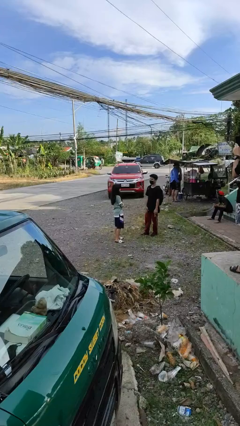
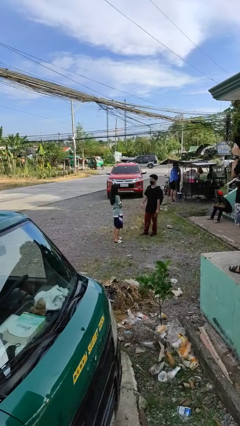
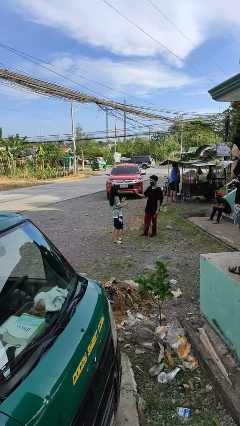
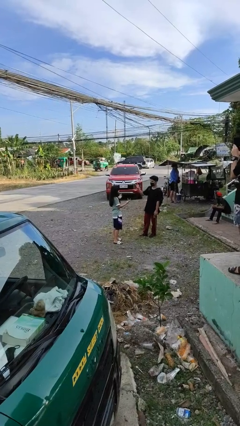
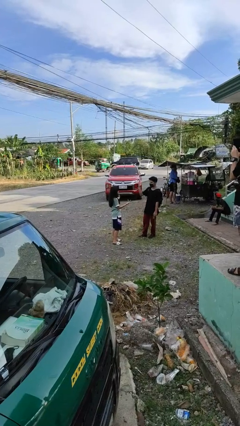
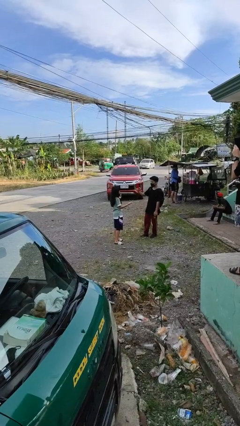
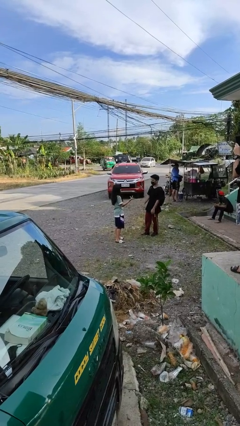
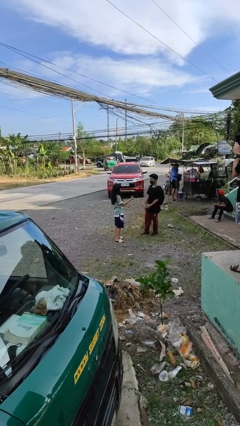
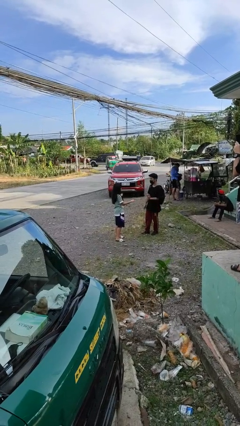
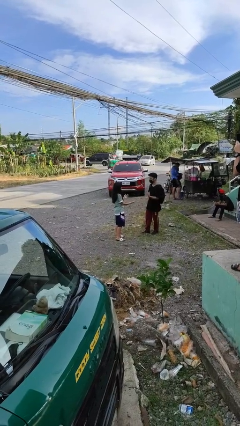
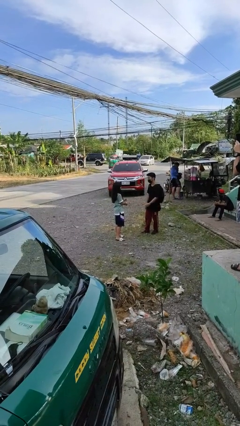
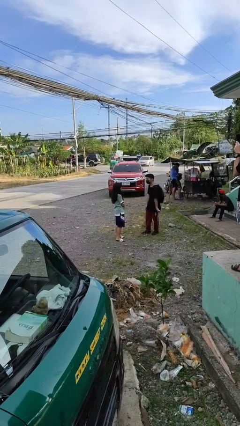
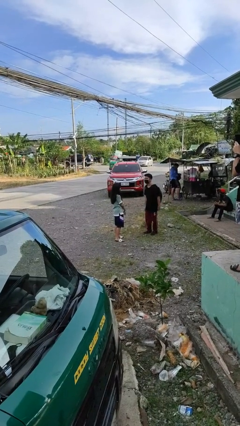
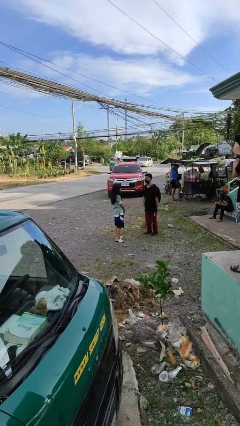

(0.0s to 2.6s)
person talks to person

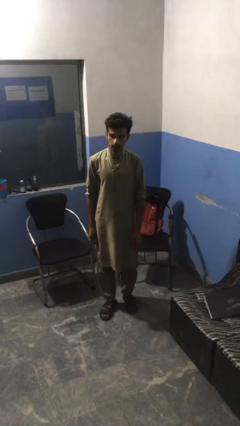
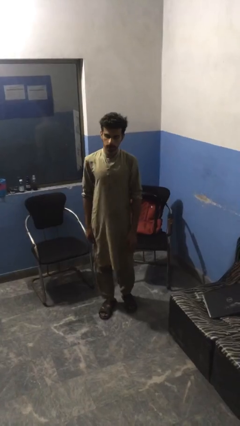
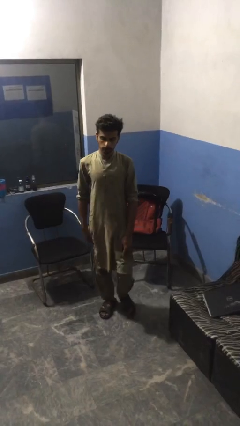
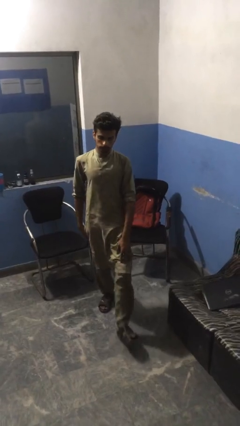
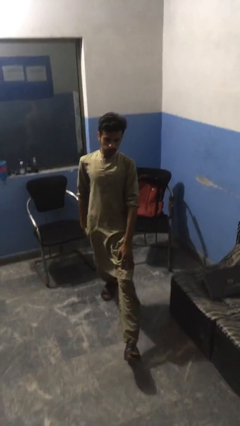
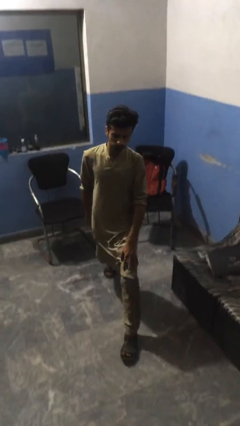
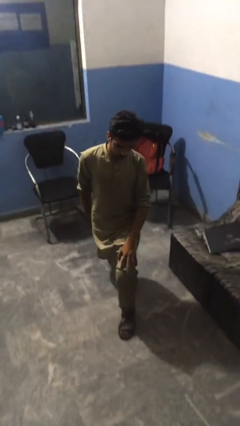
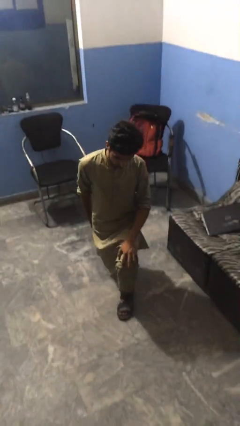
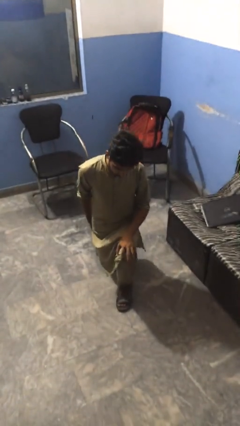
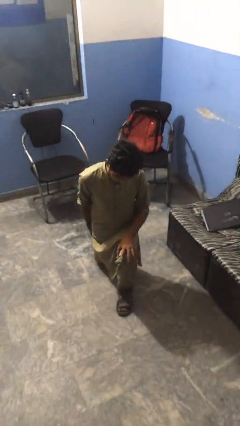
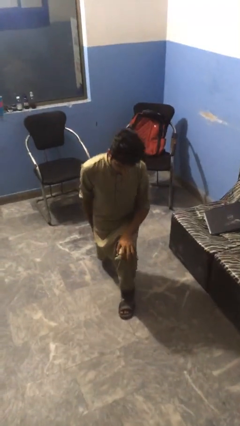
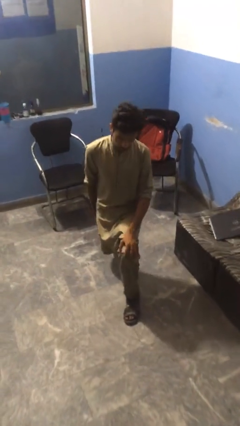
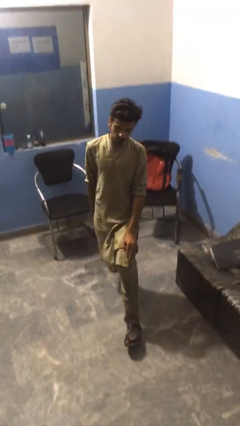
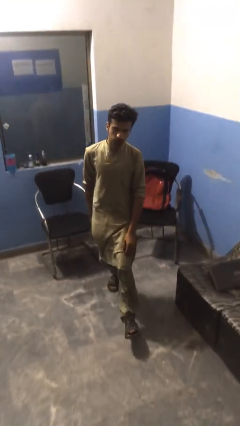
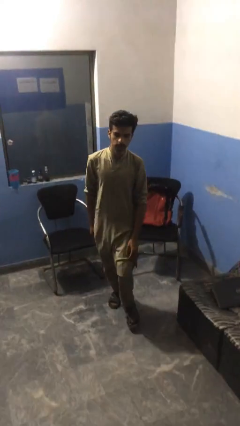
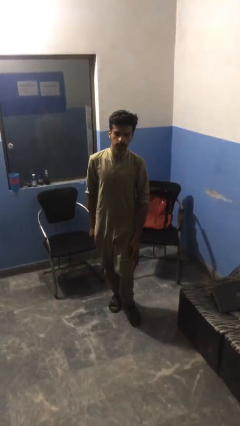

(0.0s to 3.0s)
person exercises with lunges

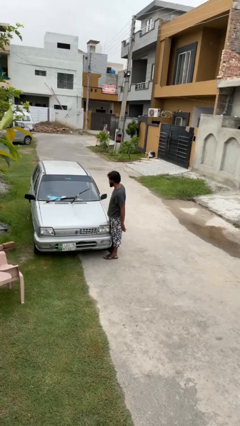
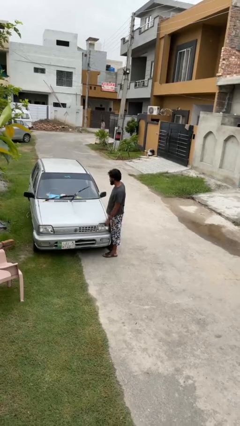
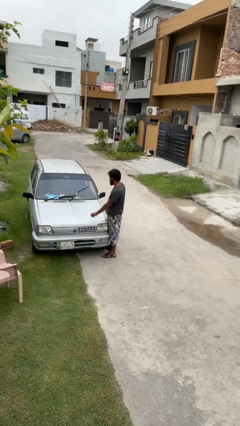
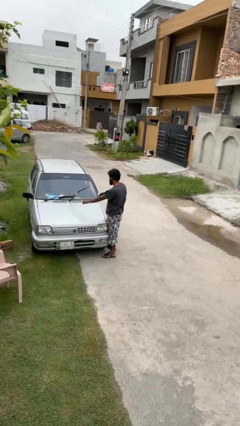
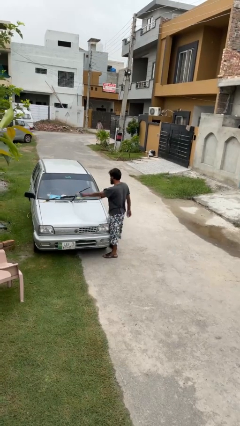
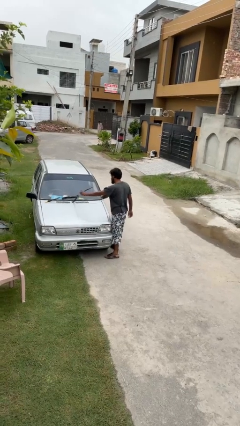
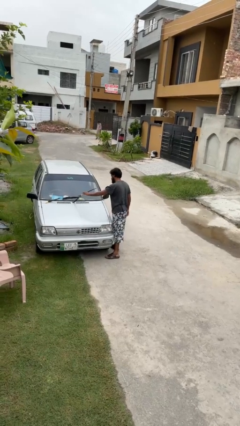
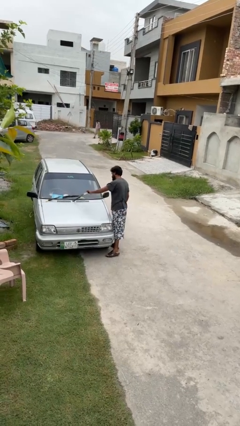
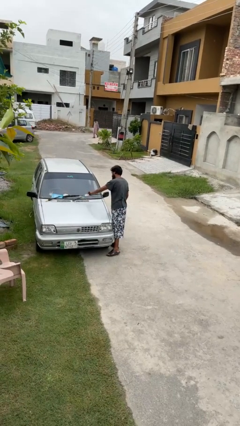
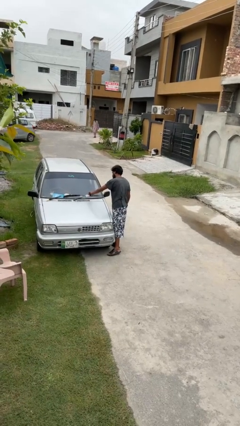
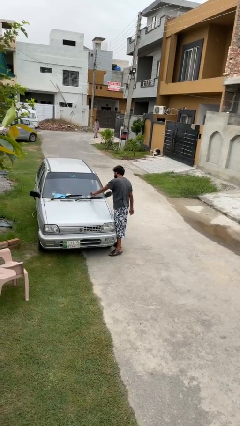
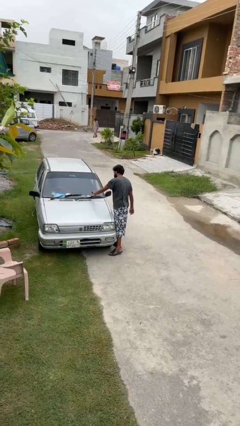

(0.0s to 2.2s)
person flips down car wipers

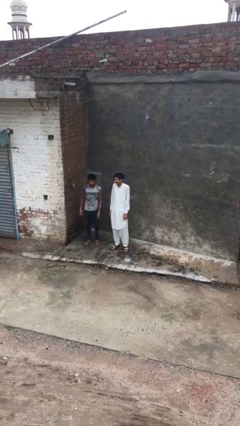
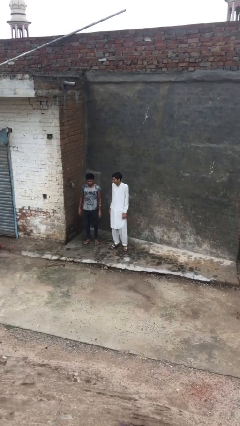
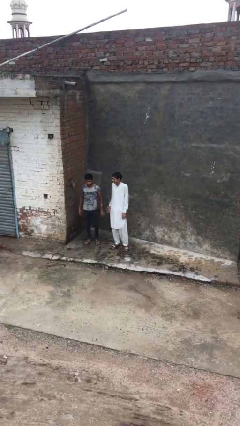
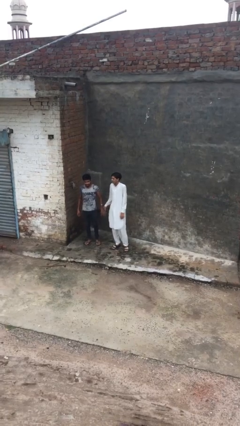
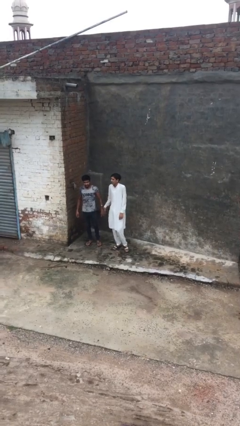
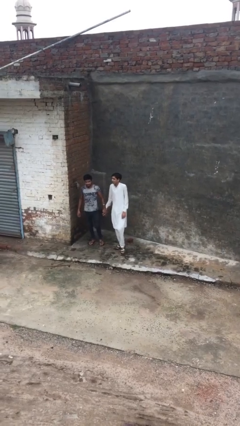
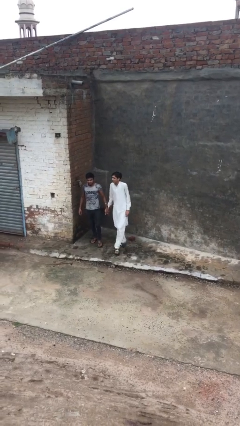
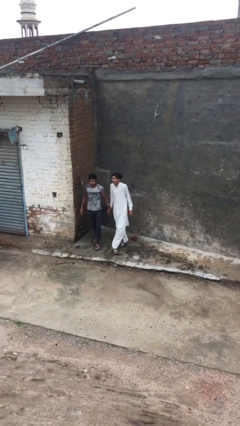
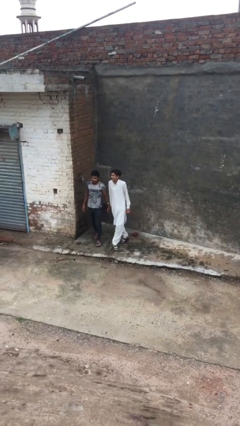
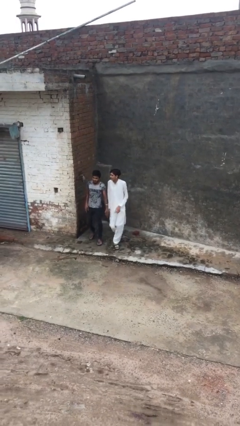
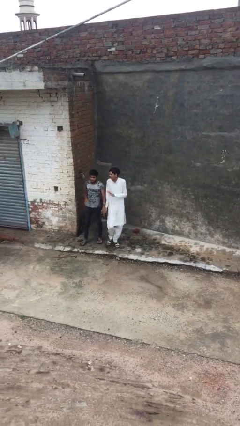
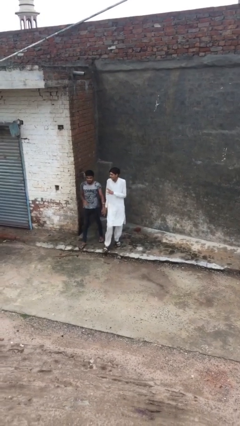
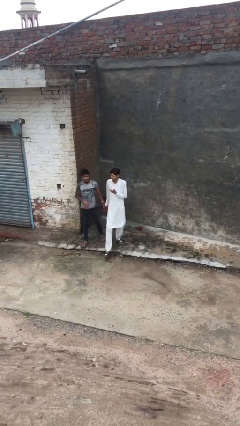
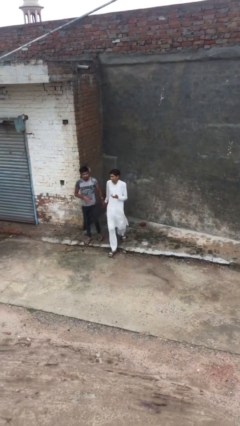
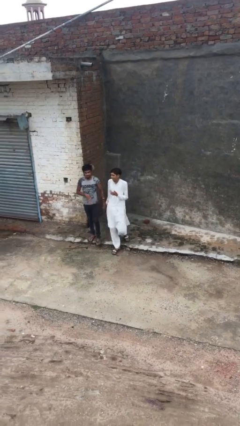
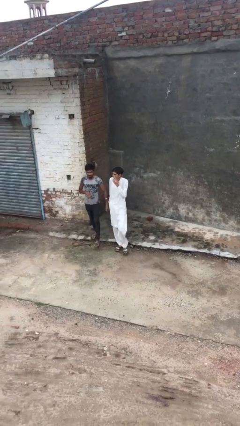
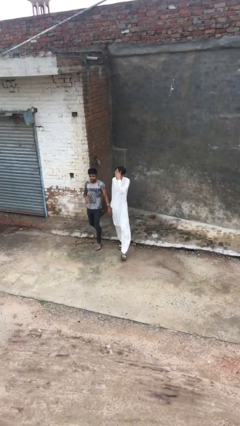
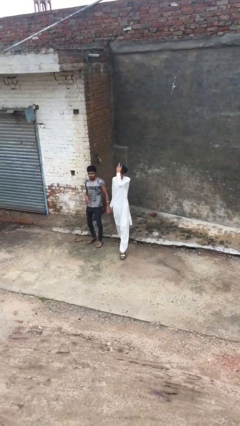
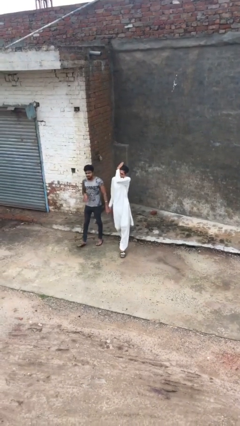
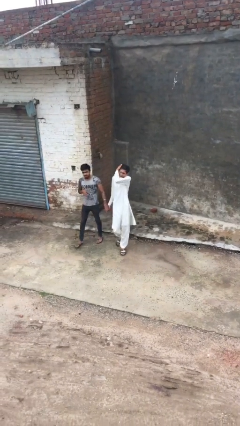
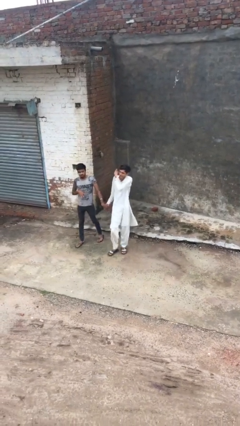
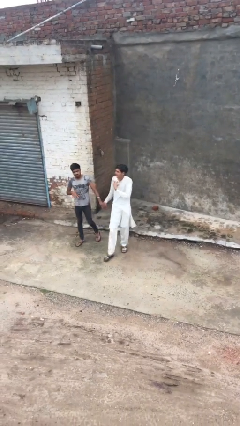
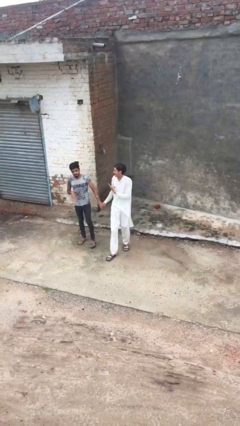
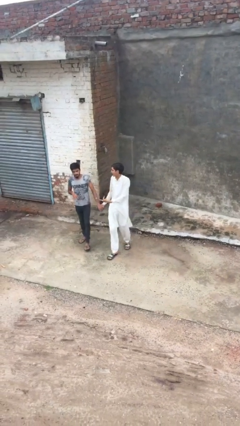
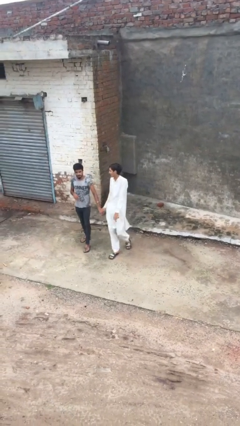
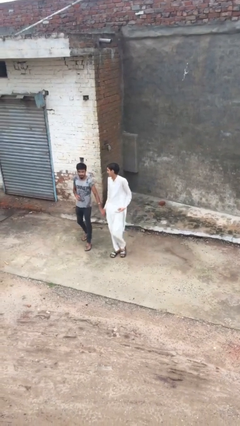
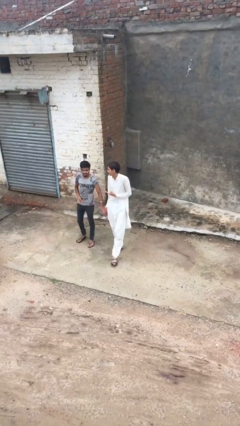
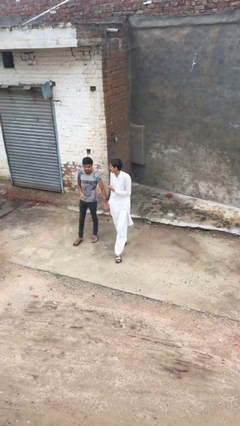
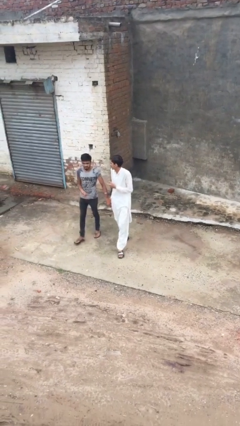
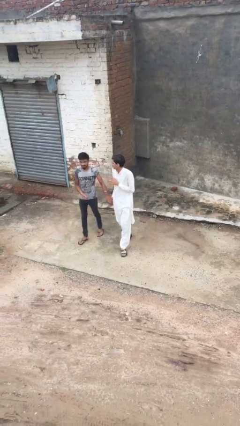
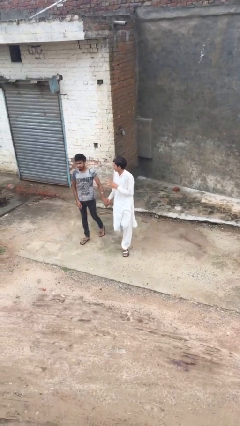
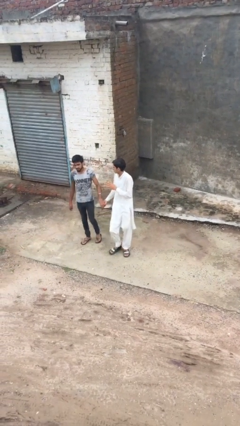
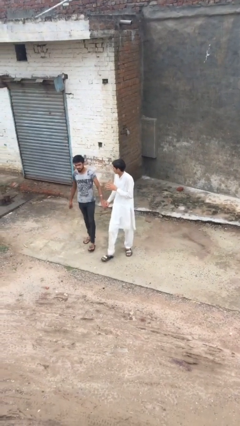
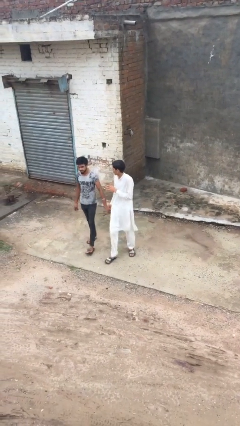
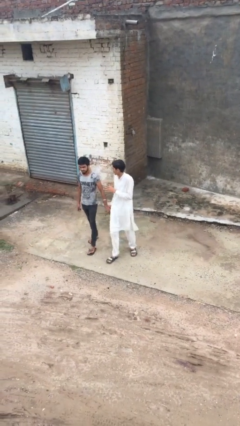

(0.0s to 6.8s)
person holds hand

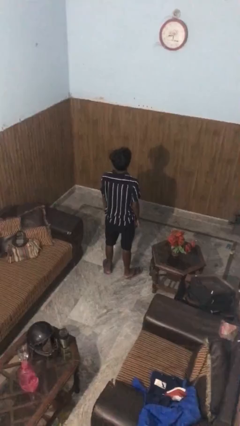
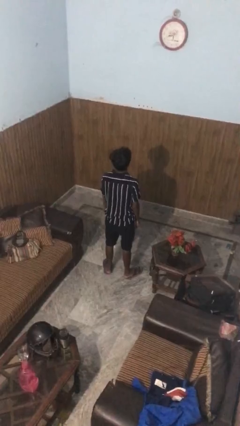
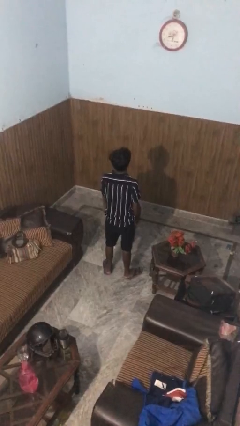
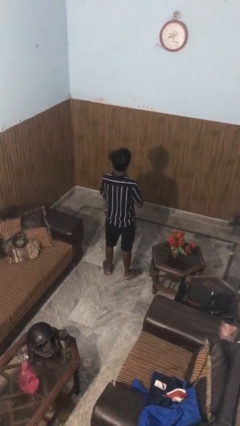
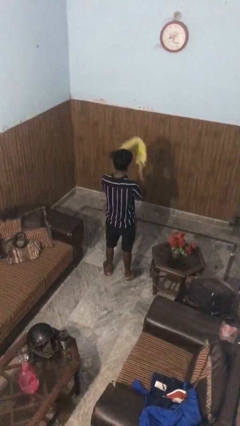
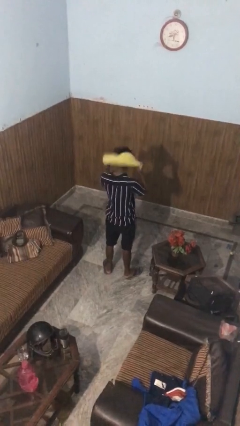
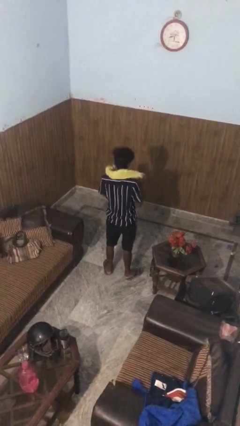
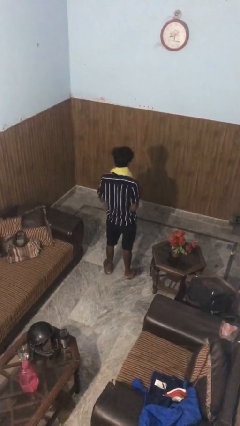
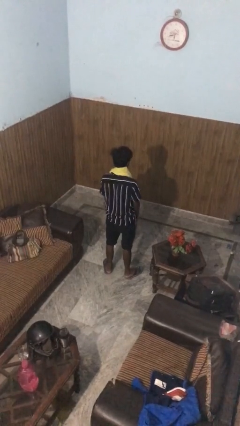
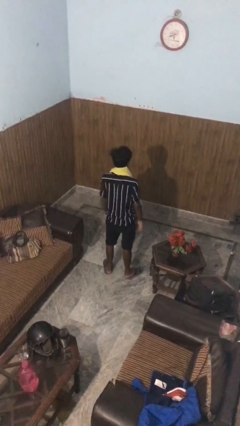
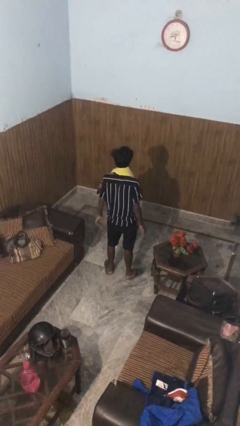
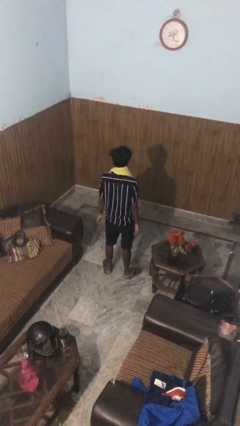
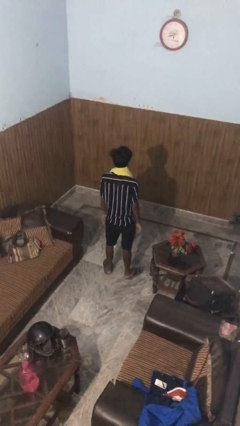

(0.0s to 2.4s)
person puts on scarf

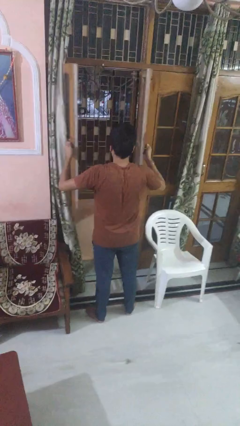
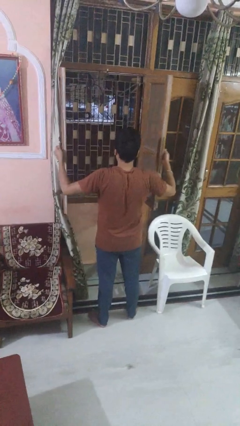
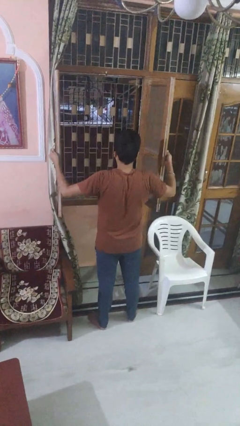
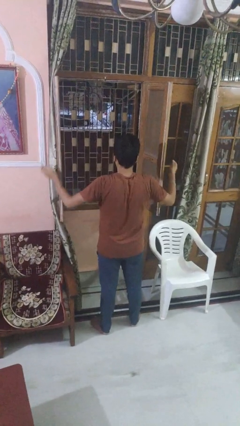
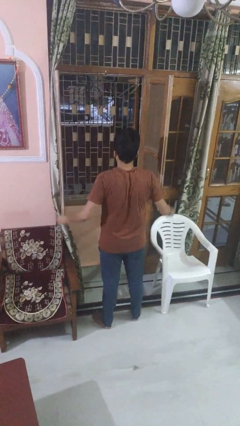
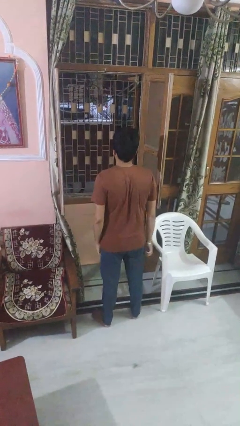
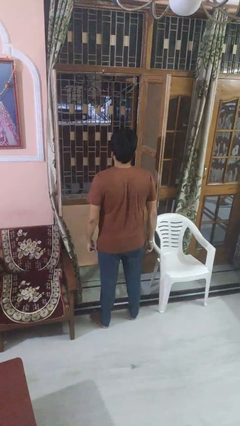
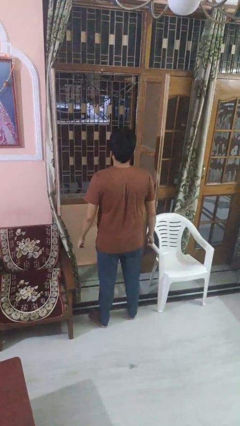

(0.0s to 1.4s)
person opens home window
